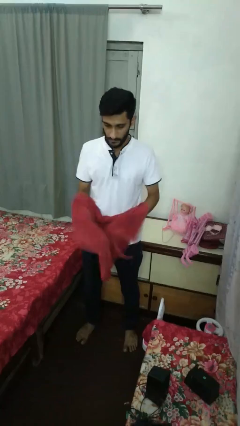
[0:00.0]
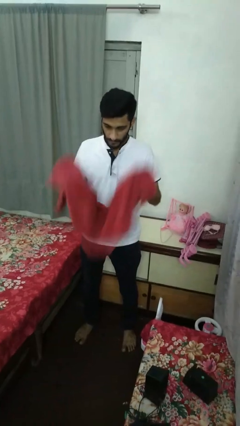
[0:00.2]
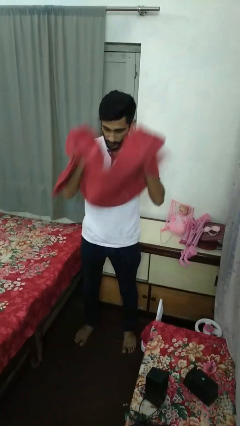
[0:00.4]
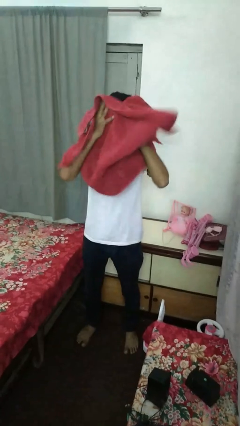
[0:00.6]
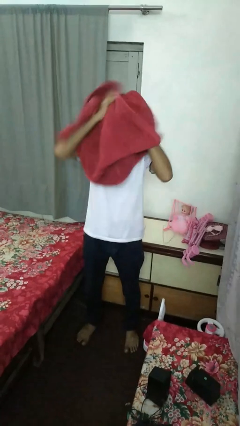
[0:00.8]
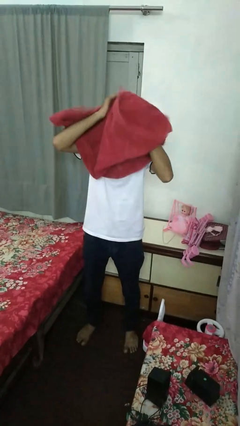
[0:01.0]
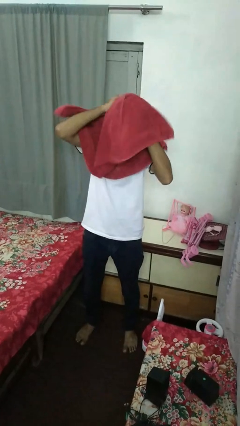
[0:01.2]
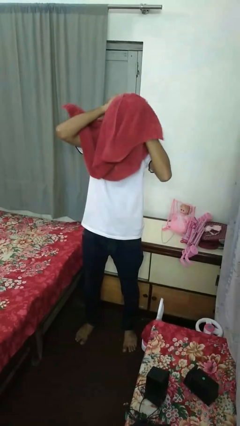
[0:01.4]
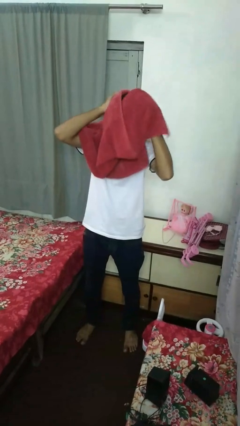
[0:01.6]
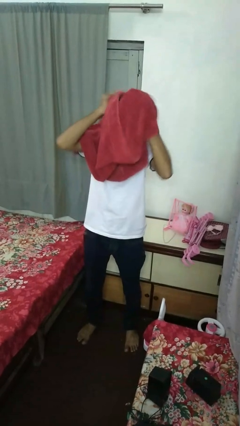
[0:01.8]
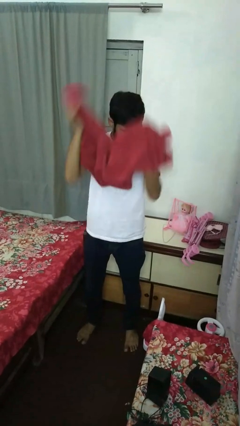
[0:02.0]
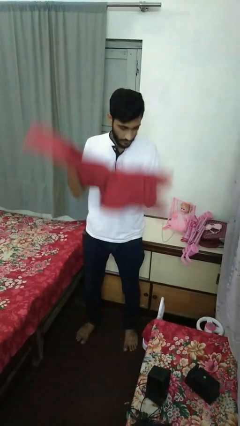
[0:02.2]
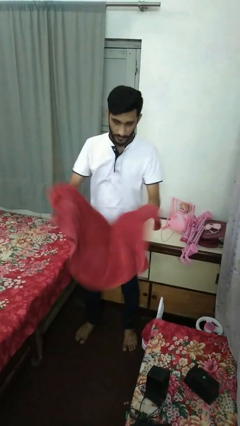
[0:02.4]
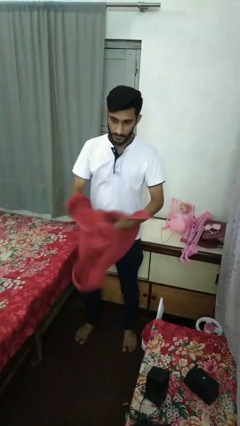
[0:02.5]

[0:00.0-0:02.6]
person dries hair with towel

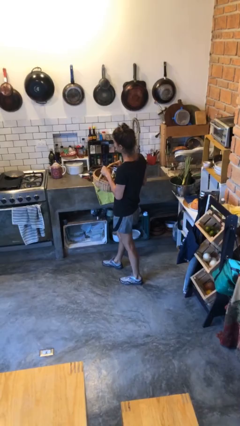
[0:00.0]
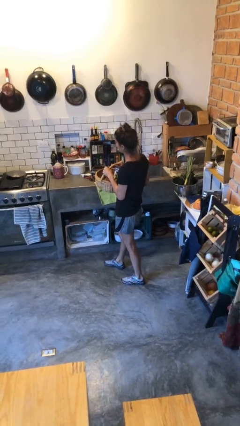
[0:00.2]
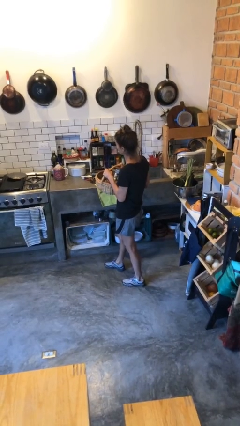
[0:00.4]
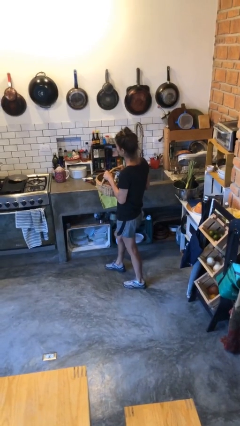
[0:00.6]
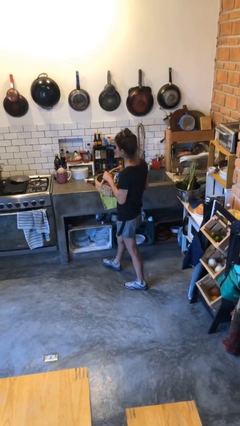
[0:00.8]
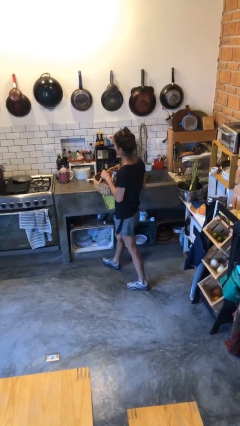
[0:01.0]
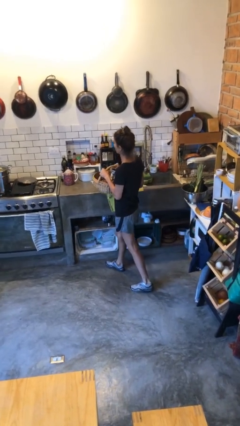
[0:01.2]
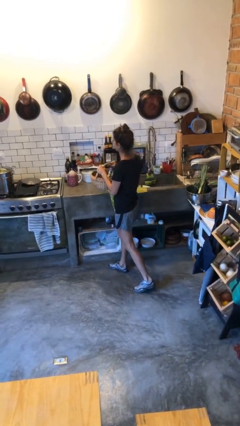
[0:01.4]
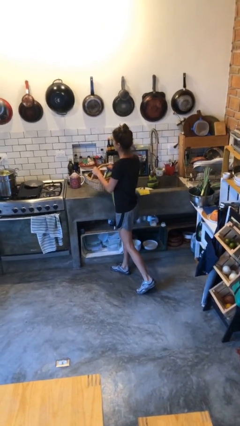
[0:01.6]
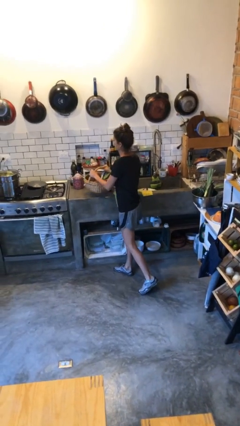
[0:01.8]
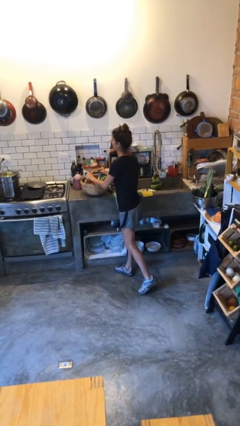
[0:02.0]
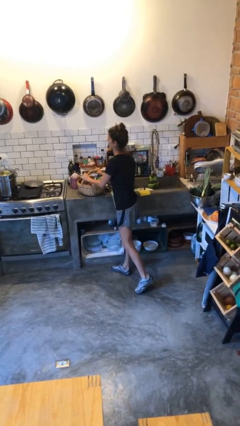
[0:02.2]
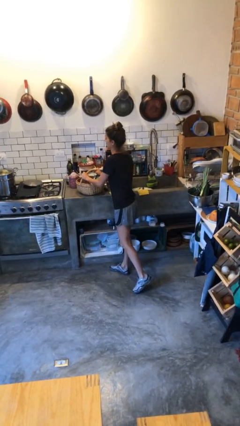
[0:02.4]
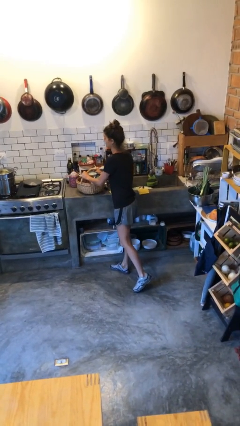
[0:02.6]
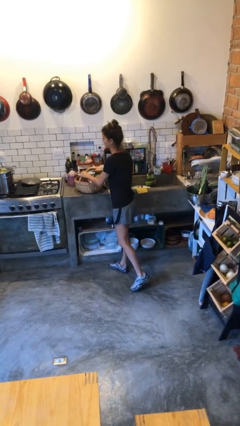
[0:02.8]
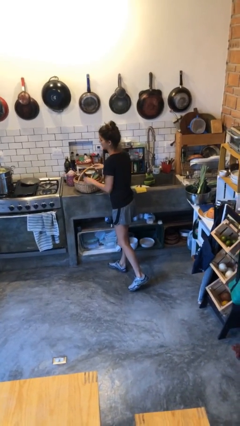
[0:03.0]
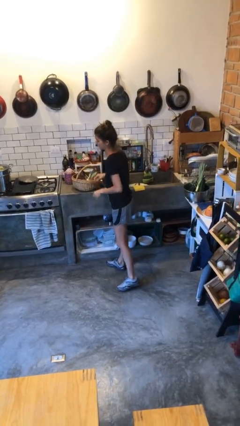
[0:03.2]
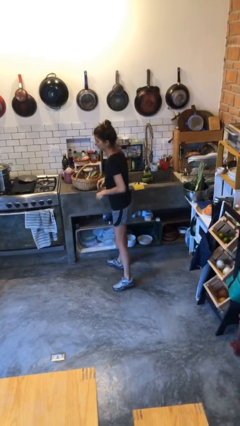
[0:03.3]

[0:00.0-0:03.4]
person puts down object on countertop

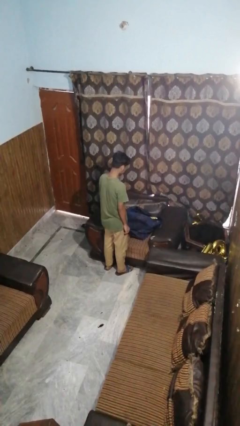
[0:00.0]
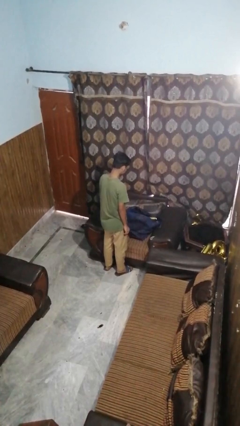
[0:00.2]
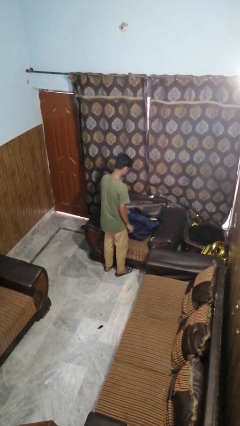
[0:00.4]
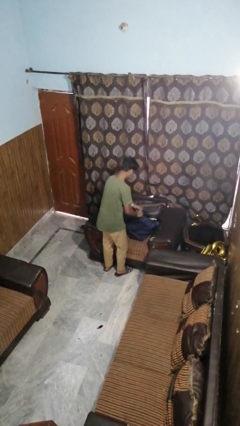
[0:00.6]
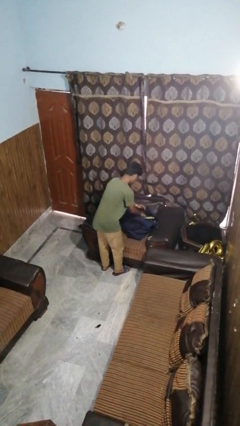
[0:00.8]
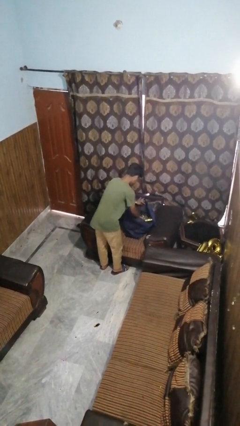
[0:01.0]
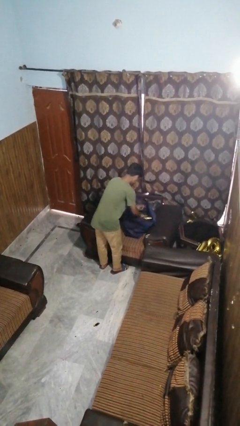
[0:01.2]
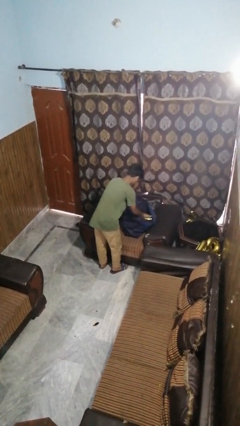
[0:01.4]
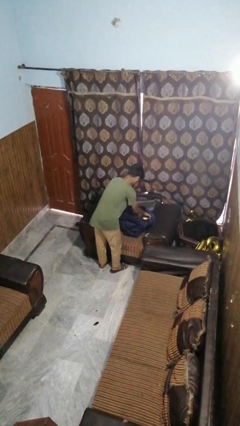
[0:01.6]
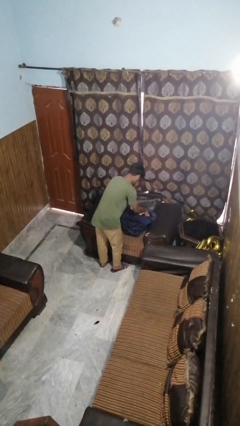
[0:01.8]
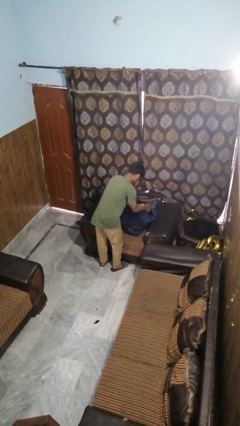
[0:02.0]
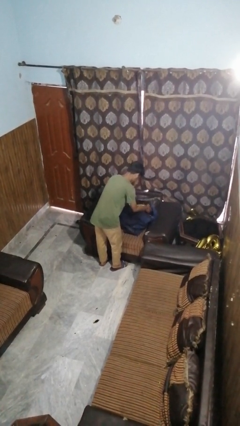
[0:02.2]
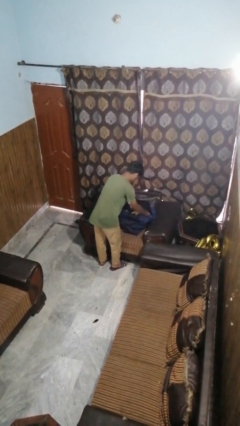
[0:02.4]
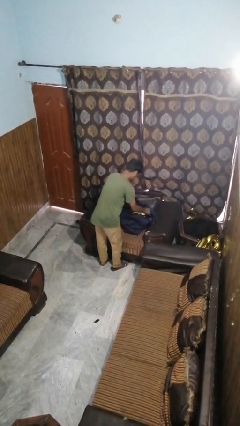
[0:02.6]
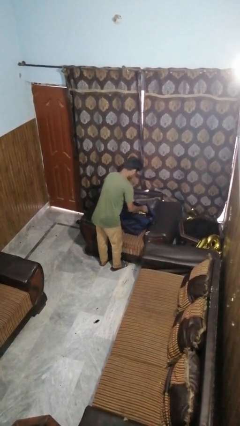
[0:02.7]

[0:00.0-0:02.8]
person searches in bag

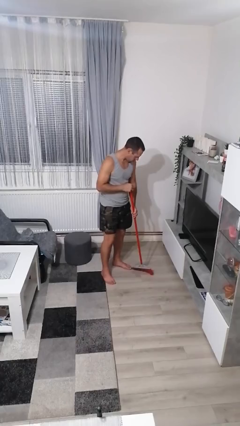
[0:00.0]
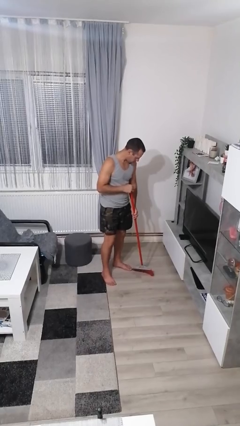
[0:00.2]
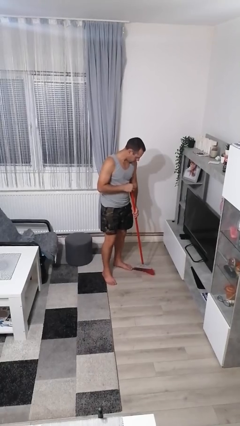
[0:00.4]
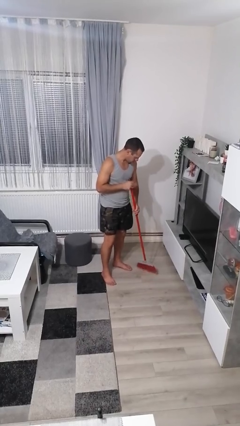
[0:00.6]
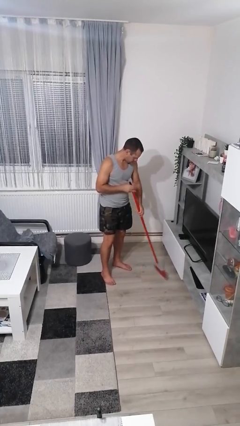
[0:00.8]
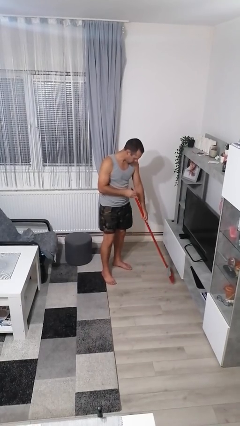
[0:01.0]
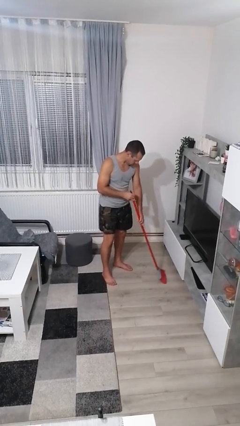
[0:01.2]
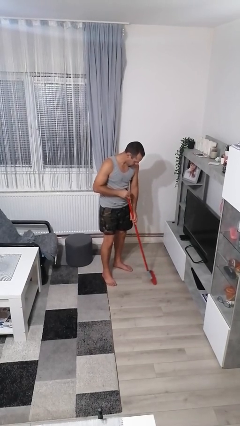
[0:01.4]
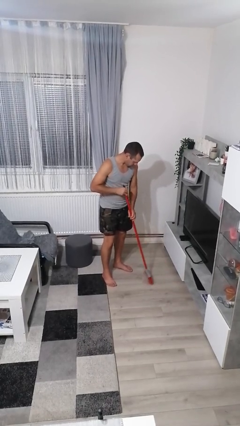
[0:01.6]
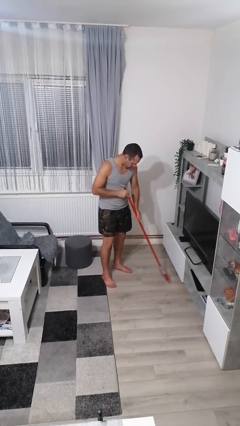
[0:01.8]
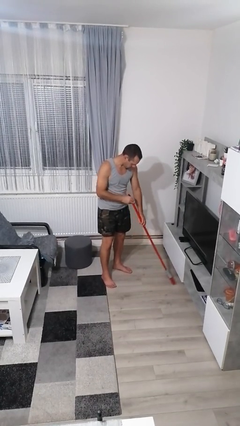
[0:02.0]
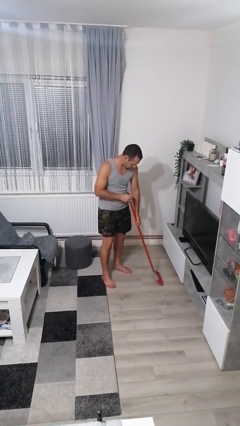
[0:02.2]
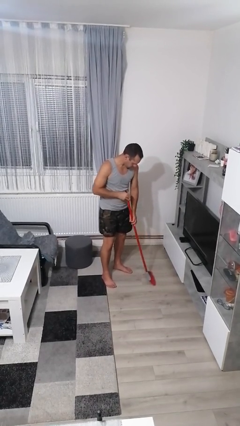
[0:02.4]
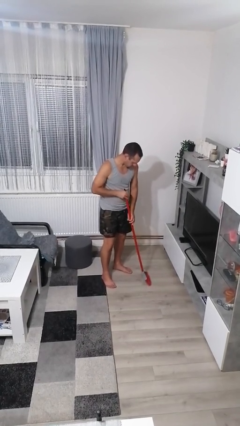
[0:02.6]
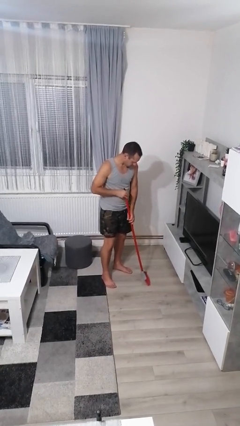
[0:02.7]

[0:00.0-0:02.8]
person sweeps floor

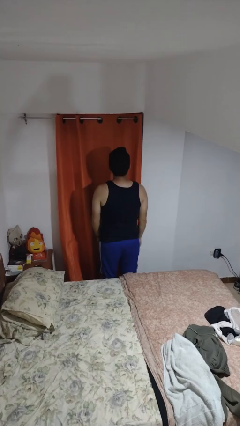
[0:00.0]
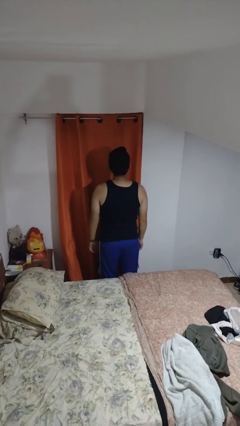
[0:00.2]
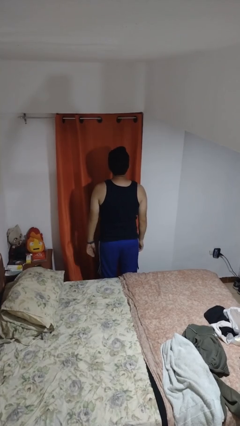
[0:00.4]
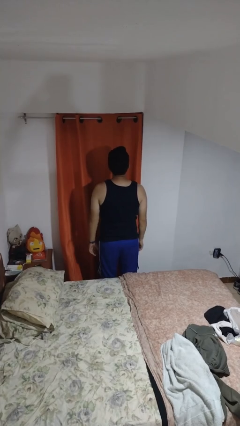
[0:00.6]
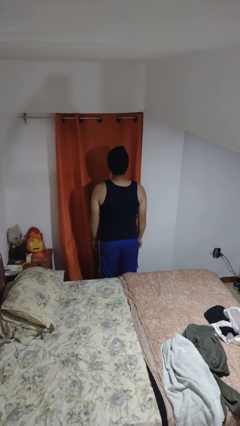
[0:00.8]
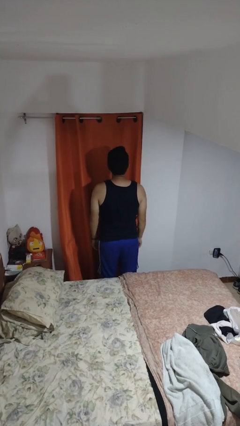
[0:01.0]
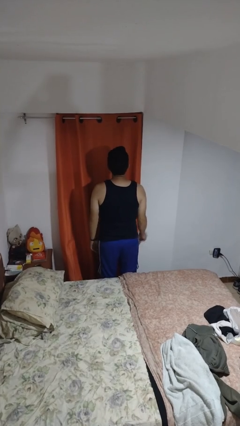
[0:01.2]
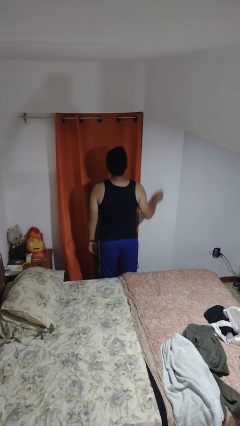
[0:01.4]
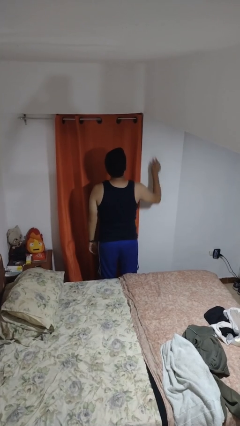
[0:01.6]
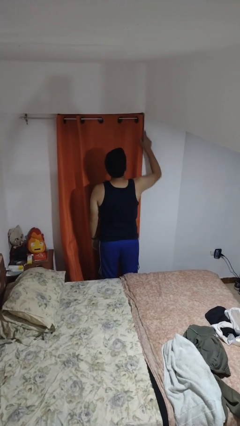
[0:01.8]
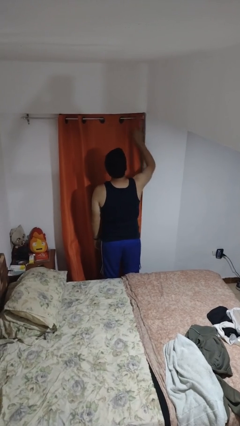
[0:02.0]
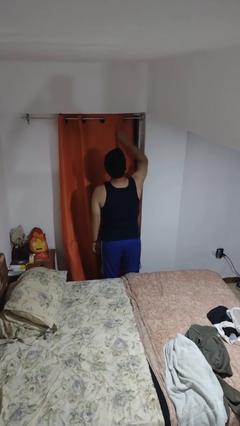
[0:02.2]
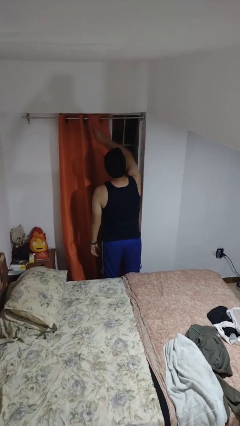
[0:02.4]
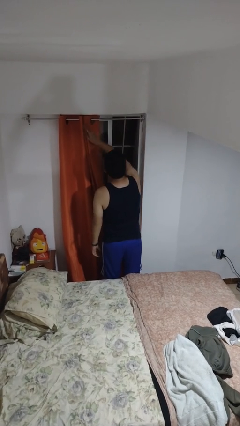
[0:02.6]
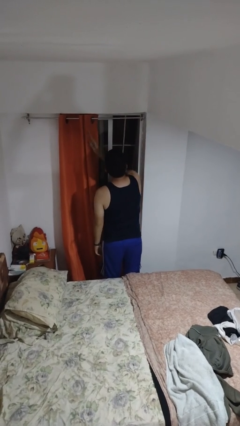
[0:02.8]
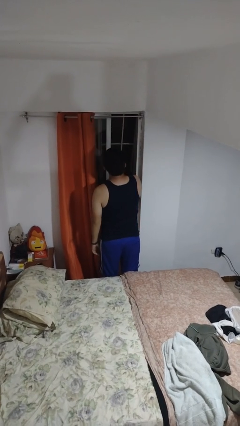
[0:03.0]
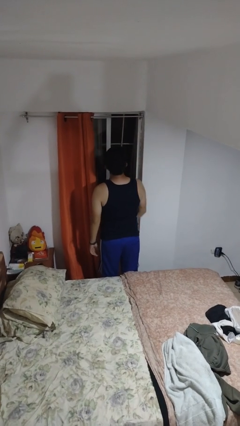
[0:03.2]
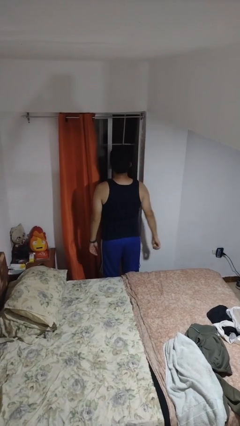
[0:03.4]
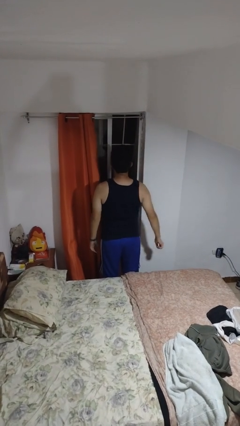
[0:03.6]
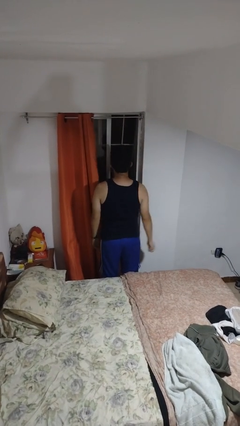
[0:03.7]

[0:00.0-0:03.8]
person opens curtains

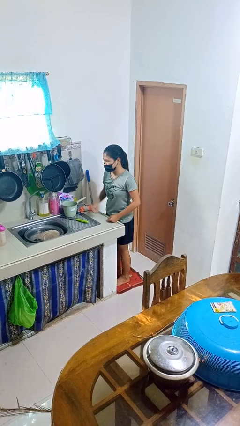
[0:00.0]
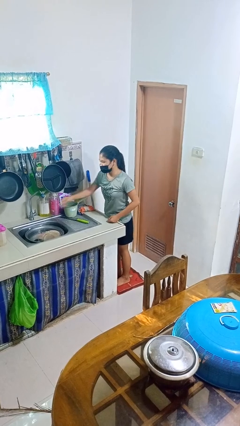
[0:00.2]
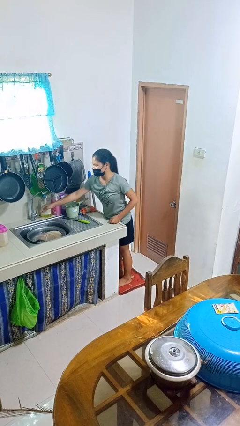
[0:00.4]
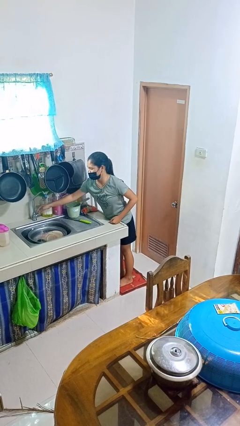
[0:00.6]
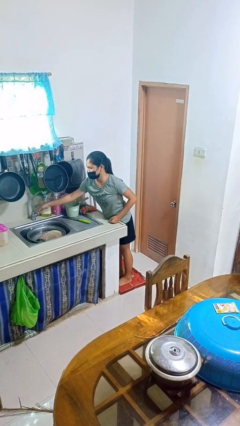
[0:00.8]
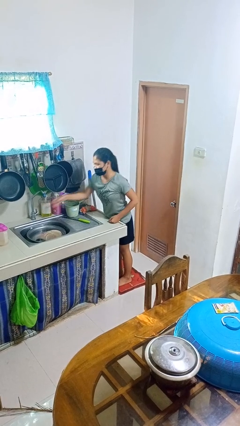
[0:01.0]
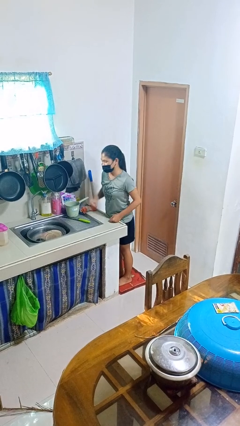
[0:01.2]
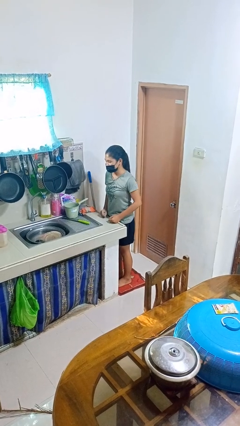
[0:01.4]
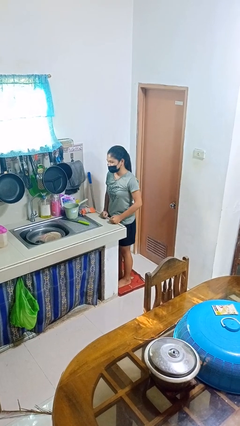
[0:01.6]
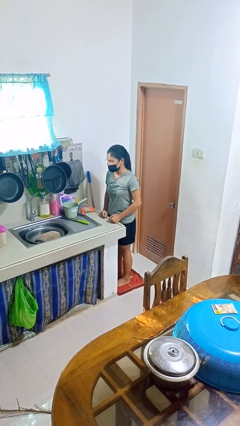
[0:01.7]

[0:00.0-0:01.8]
person turns off faucet
